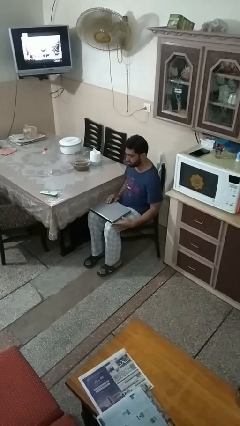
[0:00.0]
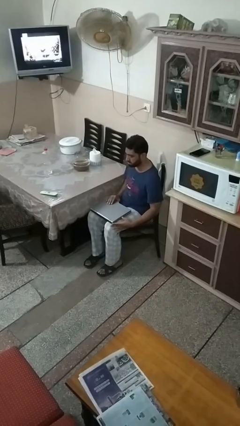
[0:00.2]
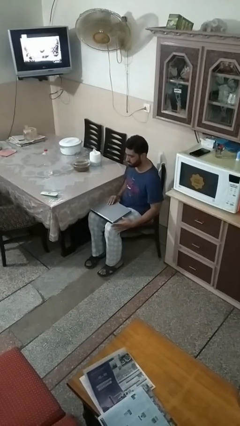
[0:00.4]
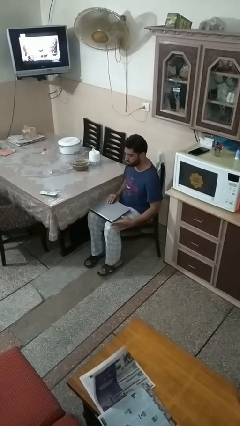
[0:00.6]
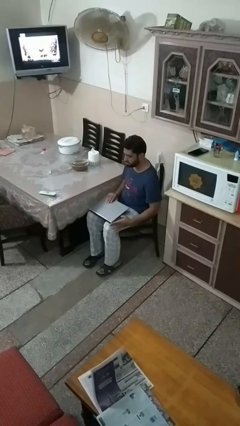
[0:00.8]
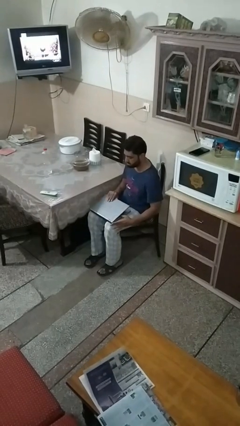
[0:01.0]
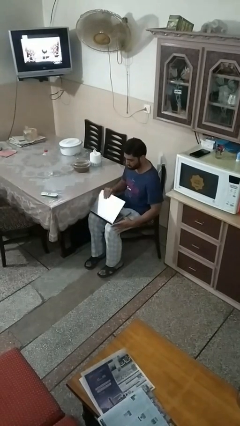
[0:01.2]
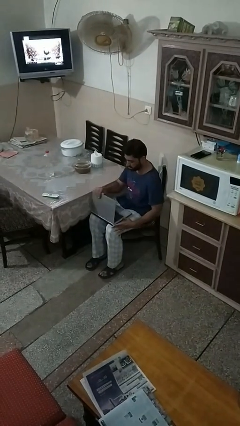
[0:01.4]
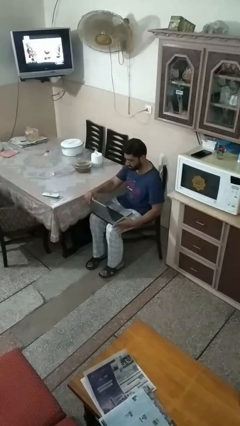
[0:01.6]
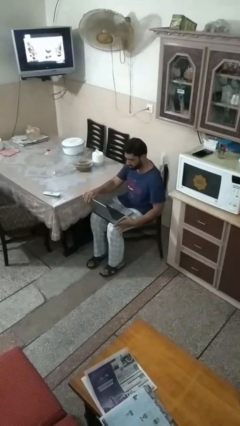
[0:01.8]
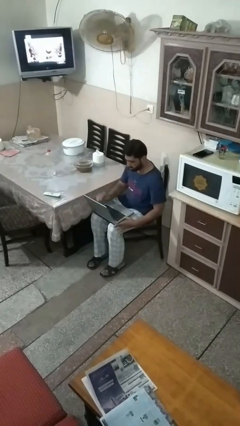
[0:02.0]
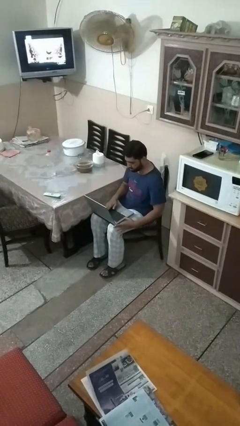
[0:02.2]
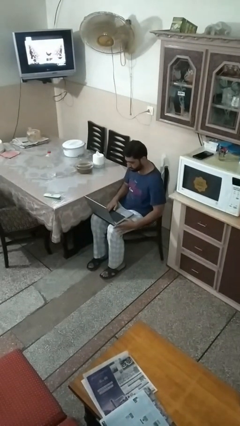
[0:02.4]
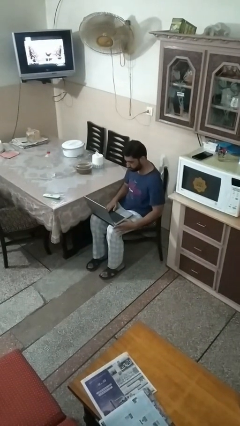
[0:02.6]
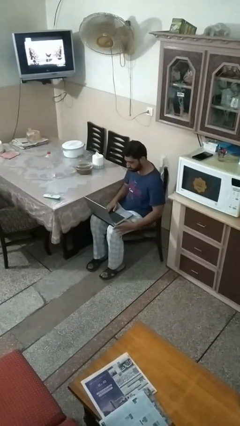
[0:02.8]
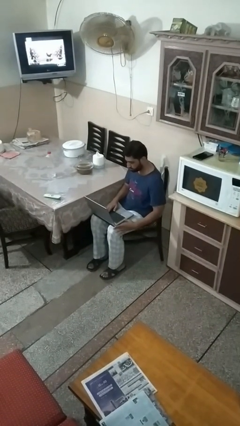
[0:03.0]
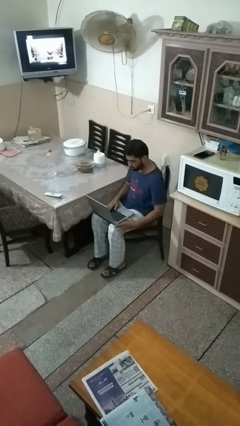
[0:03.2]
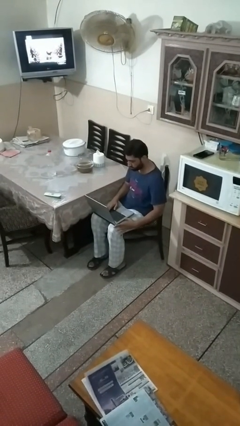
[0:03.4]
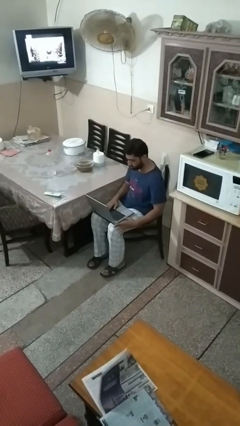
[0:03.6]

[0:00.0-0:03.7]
person opens laptop

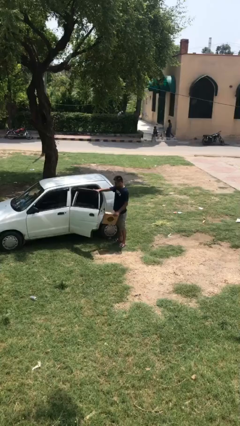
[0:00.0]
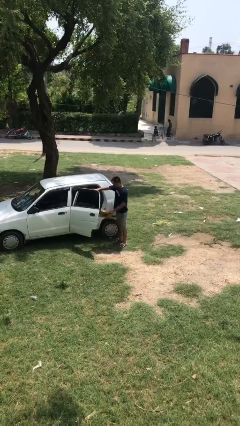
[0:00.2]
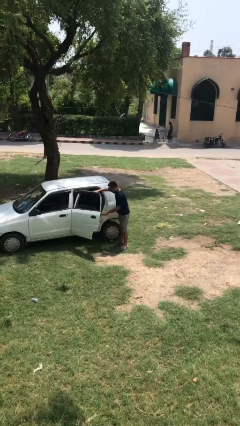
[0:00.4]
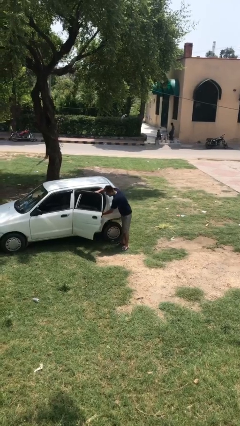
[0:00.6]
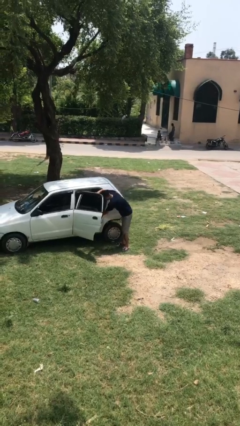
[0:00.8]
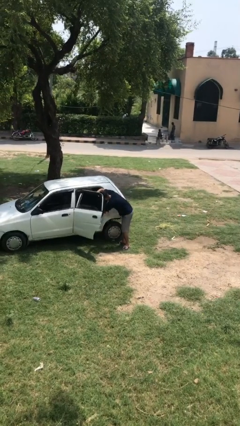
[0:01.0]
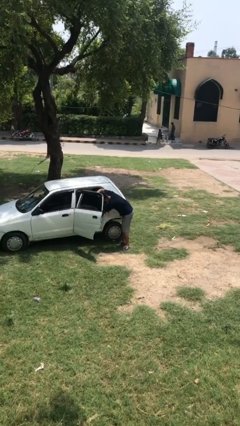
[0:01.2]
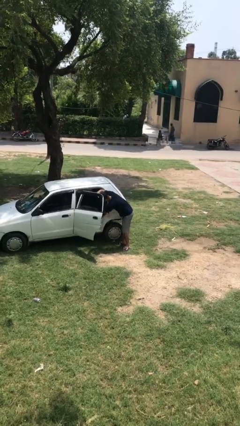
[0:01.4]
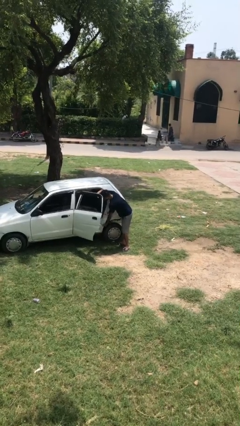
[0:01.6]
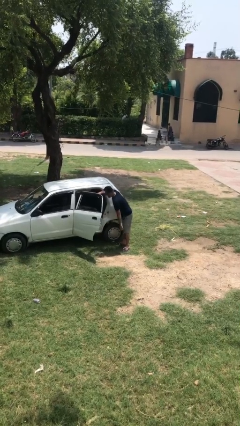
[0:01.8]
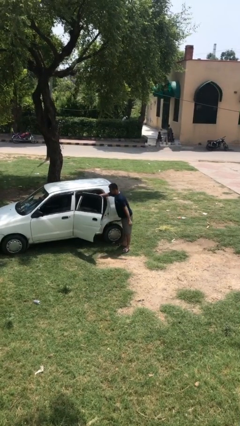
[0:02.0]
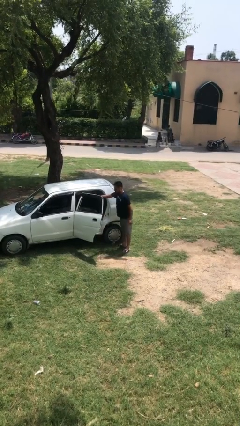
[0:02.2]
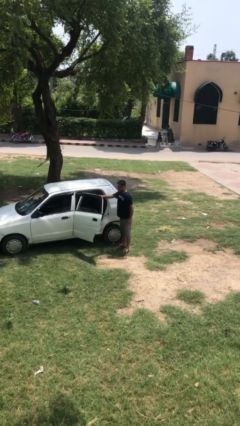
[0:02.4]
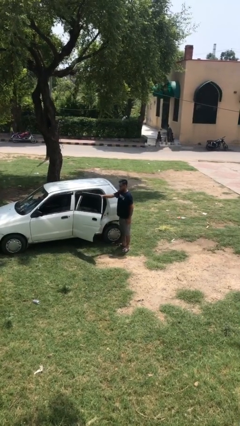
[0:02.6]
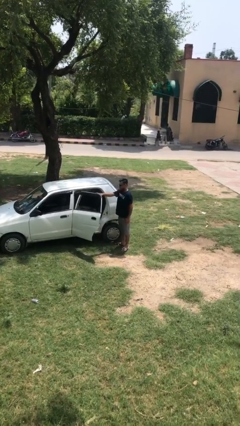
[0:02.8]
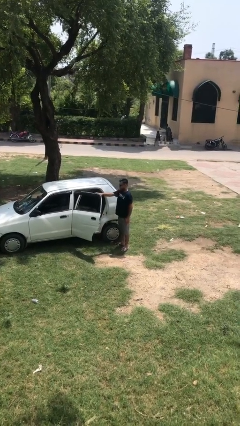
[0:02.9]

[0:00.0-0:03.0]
person loads car

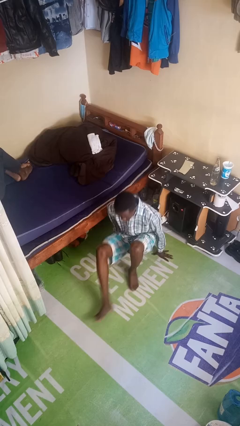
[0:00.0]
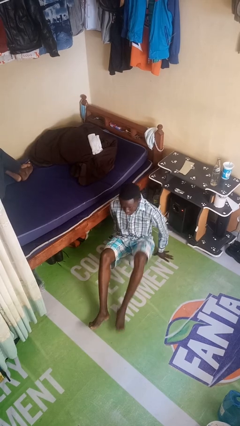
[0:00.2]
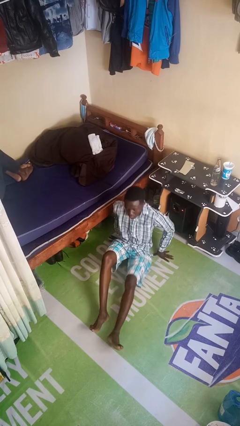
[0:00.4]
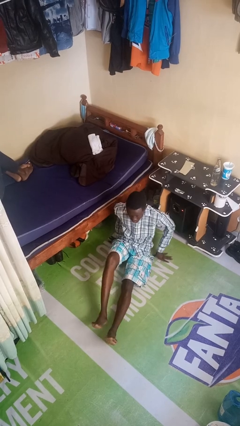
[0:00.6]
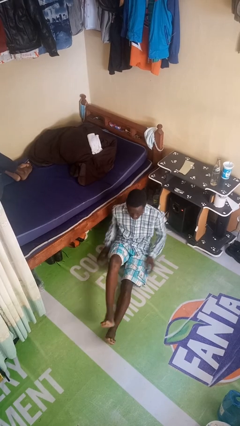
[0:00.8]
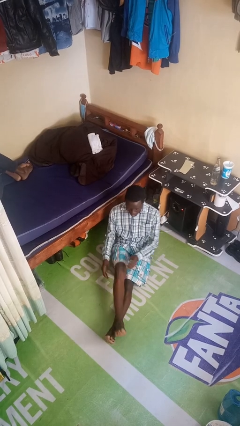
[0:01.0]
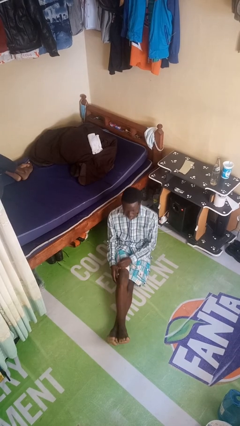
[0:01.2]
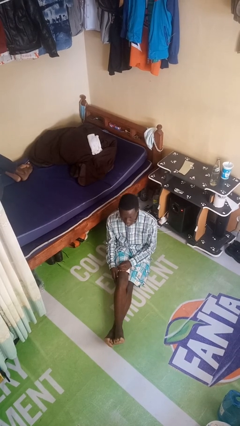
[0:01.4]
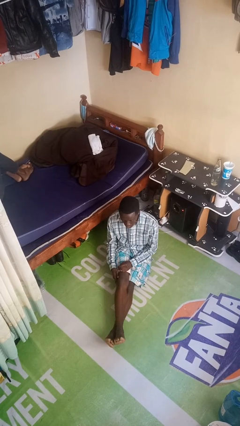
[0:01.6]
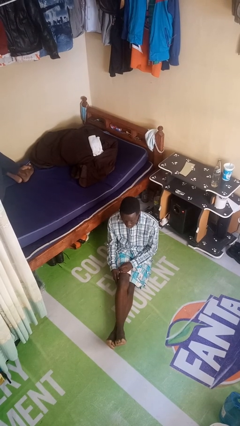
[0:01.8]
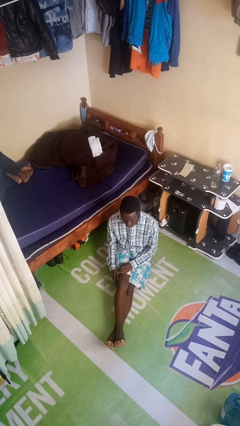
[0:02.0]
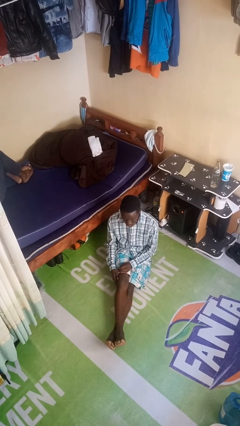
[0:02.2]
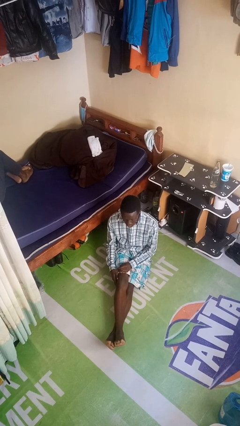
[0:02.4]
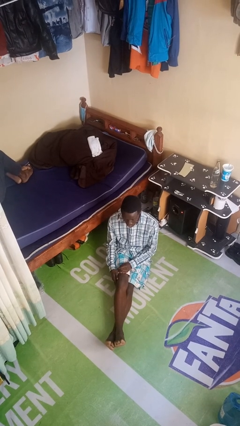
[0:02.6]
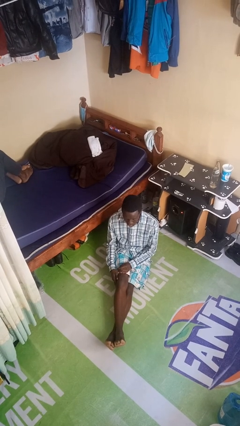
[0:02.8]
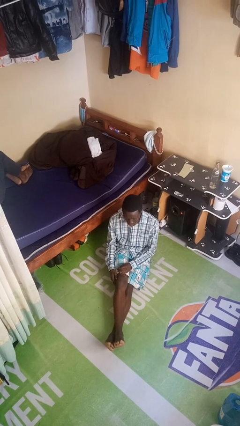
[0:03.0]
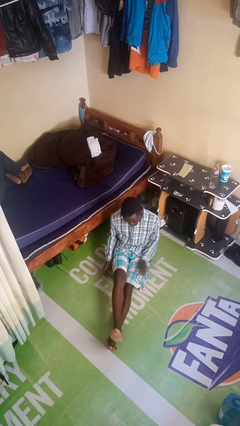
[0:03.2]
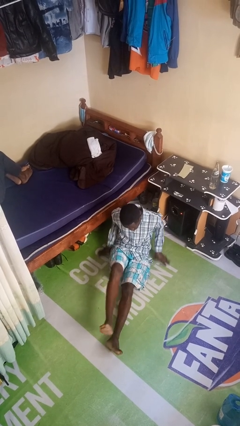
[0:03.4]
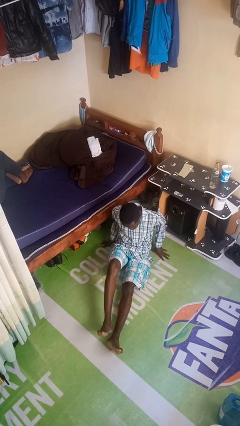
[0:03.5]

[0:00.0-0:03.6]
person sits crisscross

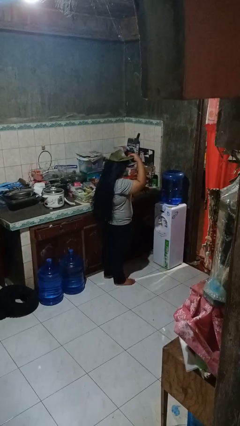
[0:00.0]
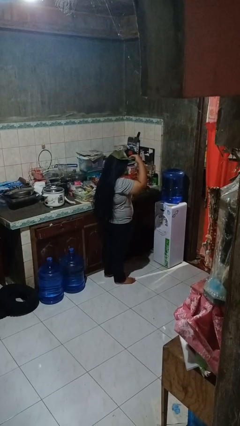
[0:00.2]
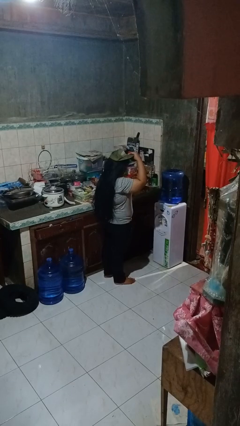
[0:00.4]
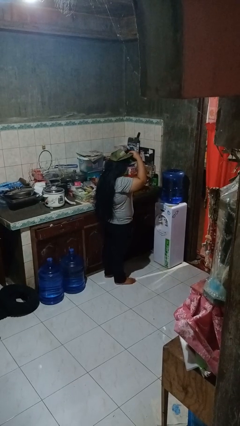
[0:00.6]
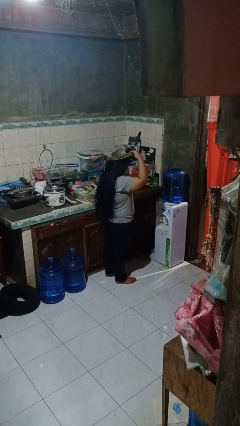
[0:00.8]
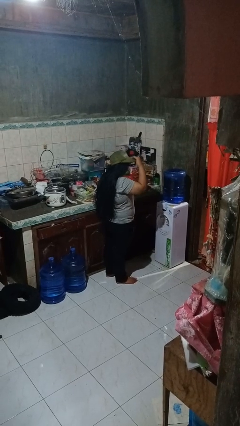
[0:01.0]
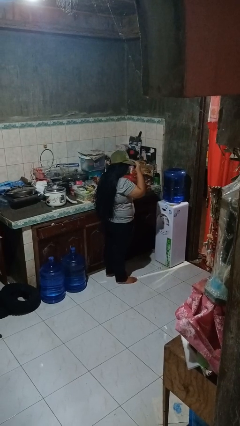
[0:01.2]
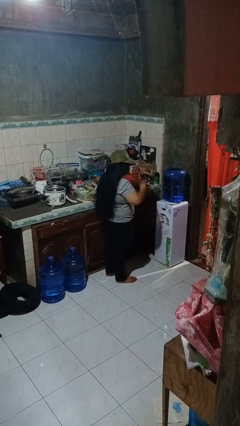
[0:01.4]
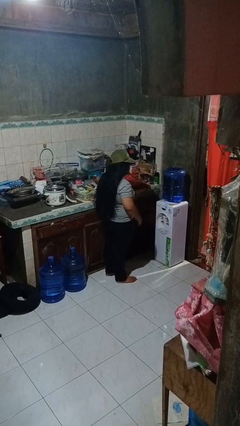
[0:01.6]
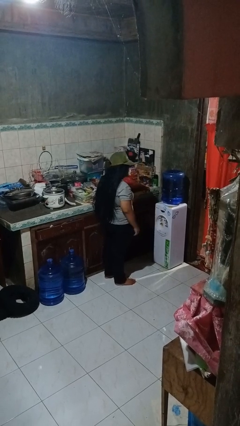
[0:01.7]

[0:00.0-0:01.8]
person puts on hat

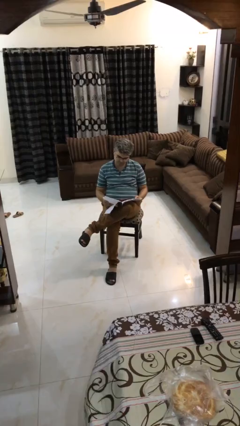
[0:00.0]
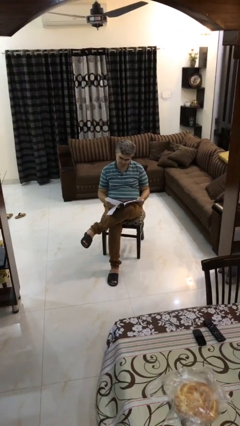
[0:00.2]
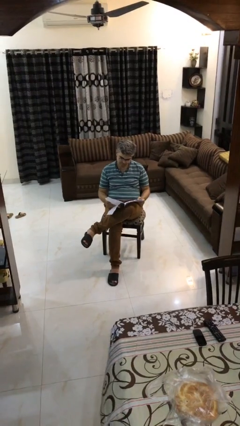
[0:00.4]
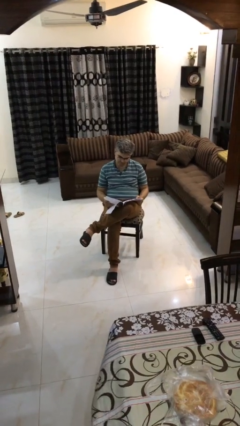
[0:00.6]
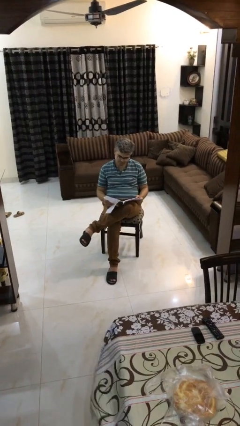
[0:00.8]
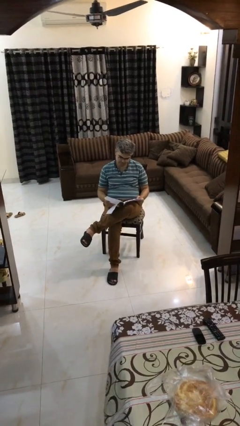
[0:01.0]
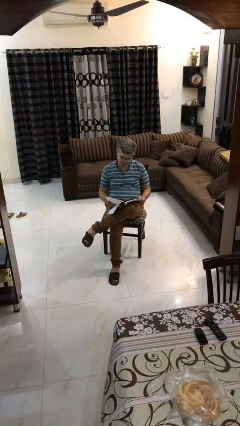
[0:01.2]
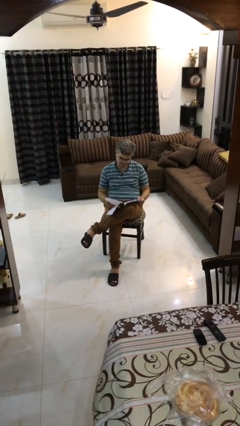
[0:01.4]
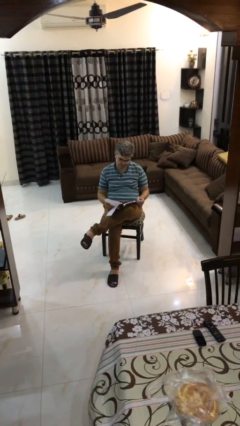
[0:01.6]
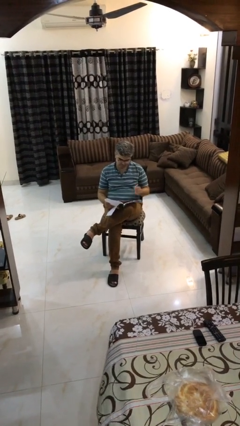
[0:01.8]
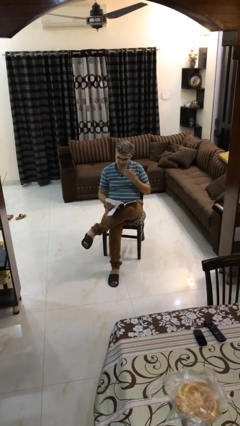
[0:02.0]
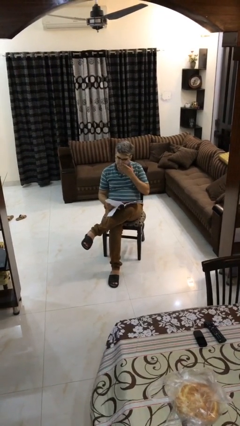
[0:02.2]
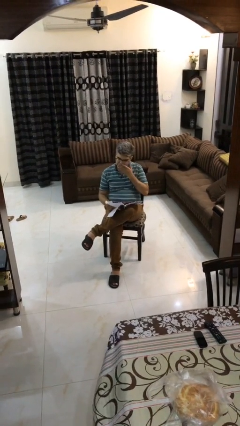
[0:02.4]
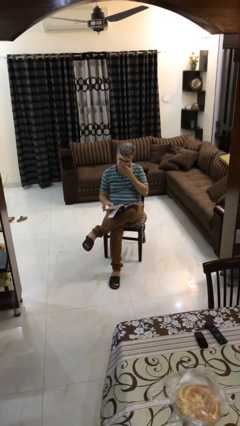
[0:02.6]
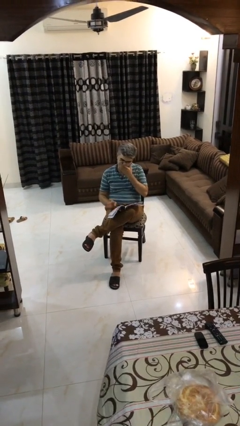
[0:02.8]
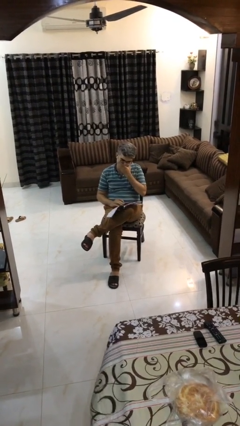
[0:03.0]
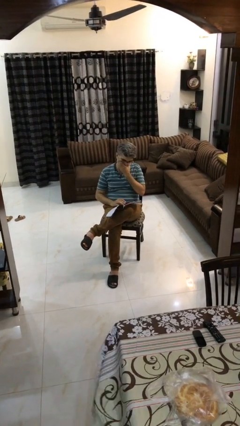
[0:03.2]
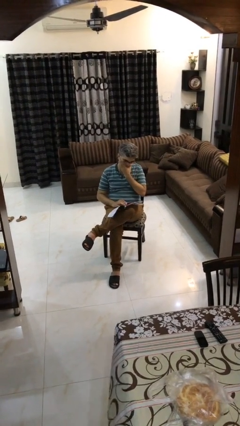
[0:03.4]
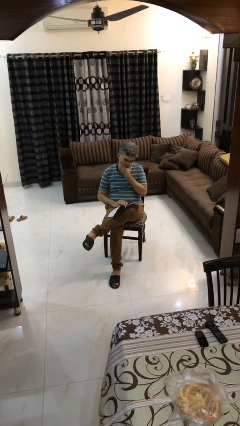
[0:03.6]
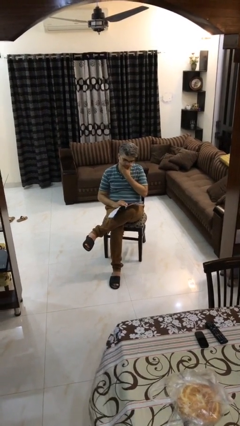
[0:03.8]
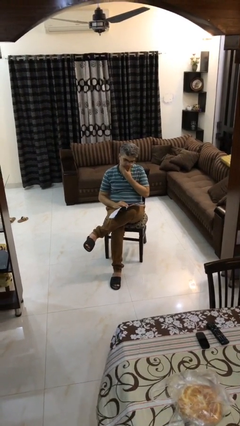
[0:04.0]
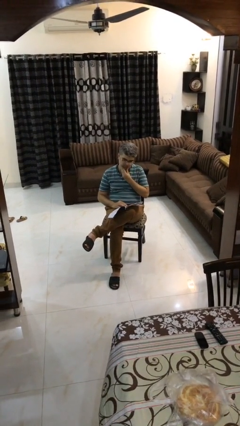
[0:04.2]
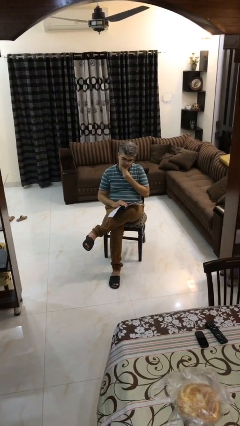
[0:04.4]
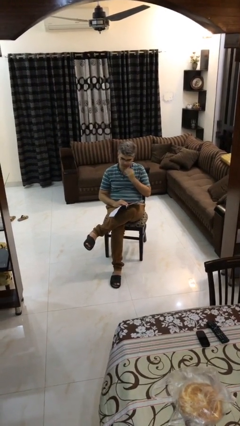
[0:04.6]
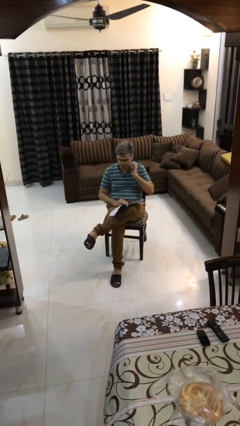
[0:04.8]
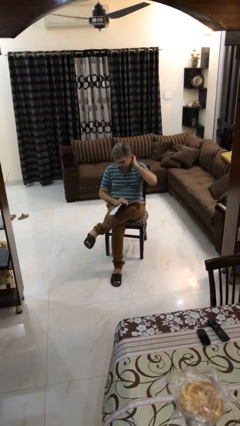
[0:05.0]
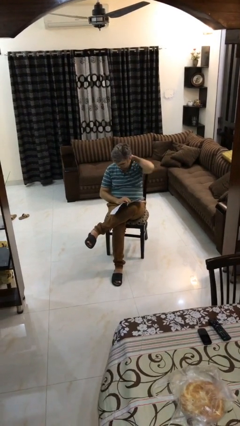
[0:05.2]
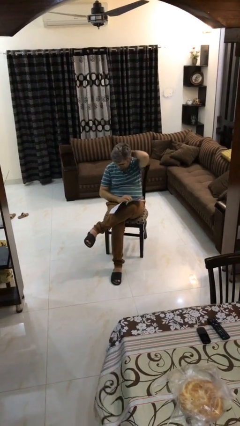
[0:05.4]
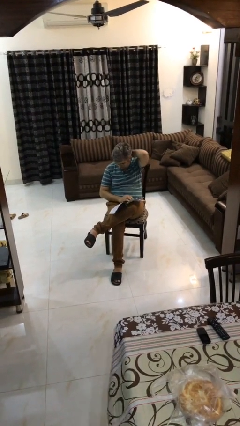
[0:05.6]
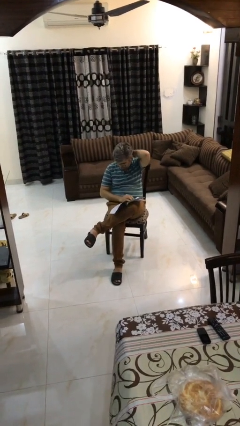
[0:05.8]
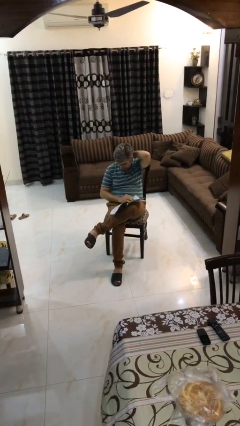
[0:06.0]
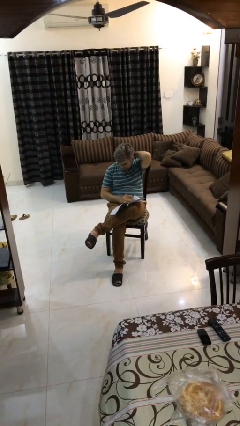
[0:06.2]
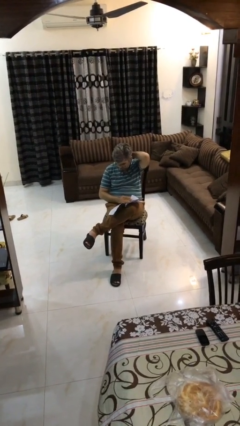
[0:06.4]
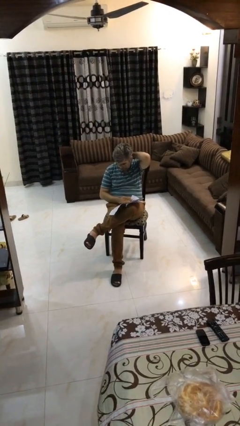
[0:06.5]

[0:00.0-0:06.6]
person reads document
